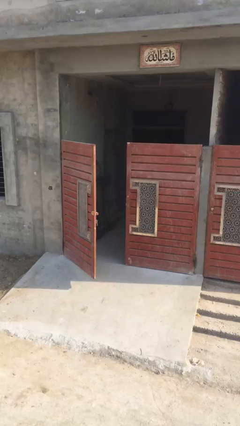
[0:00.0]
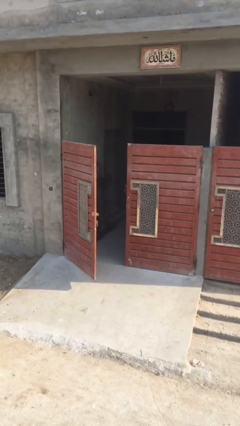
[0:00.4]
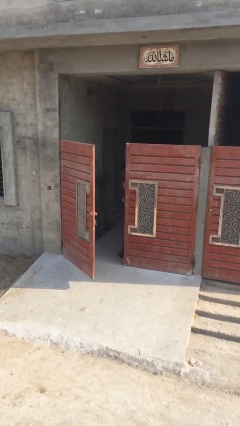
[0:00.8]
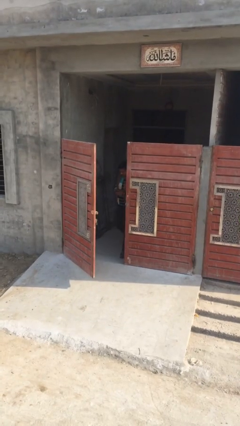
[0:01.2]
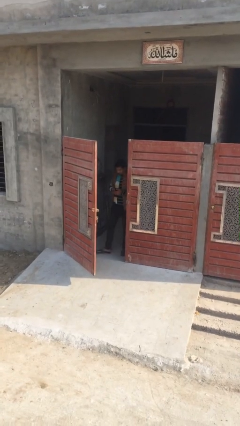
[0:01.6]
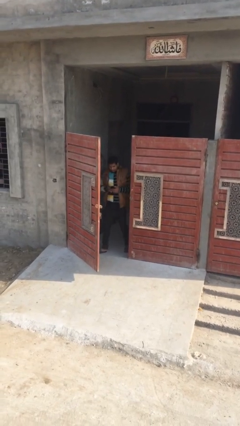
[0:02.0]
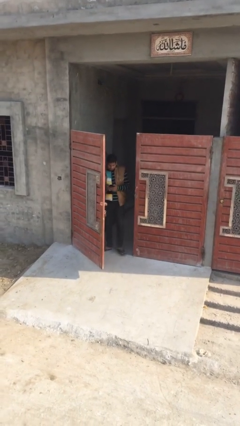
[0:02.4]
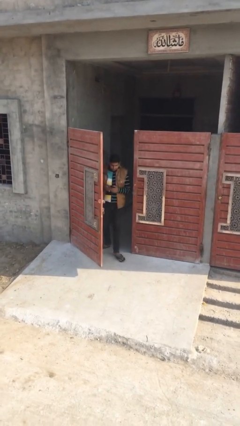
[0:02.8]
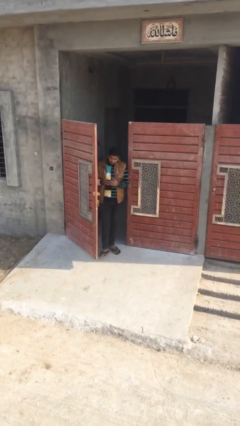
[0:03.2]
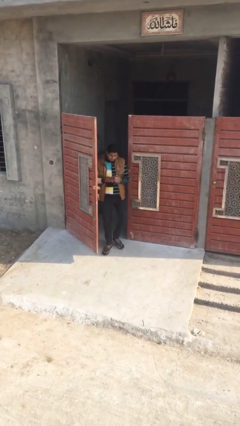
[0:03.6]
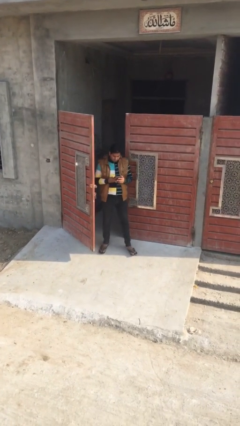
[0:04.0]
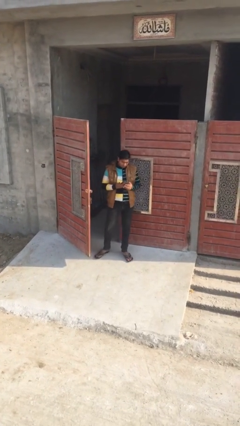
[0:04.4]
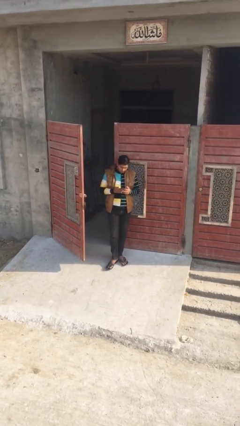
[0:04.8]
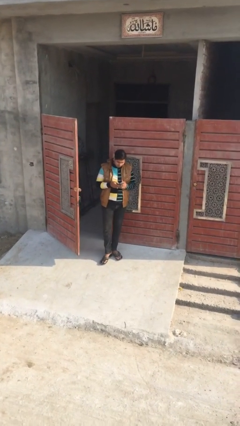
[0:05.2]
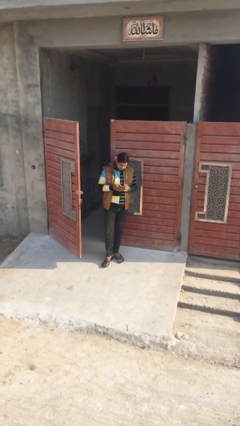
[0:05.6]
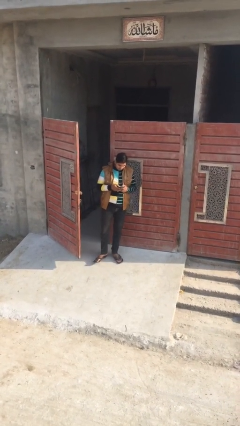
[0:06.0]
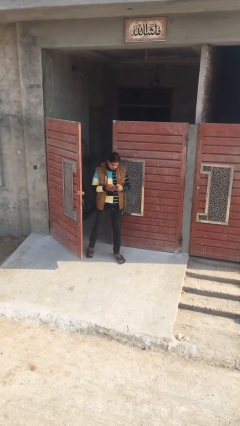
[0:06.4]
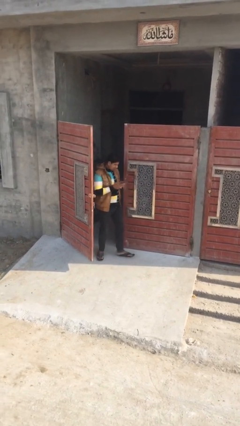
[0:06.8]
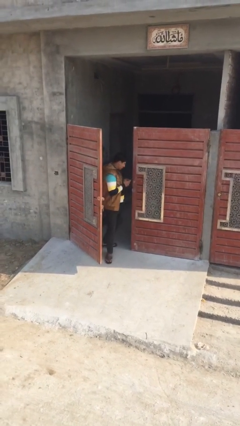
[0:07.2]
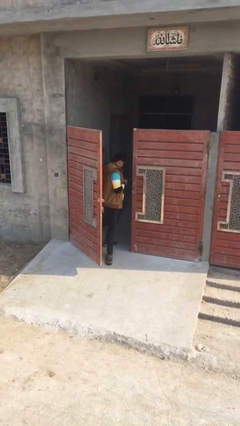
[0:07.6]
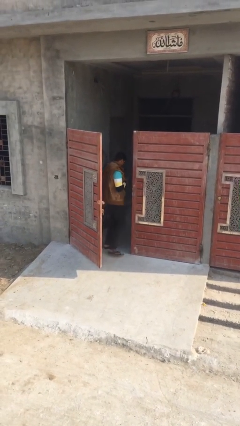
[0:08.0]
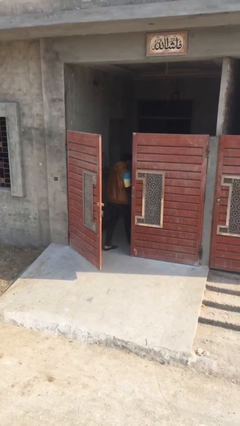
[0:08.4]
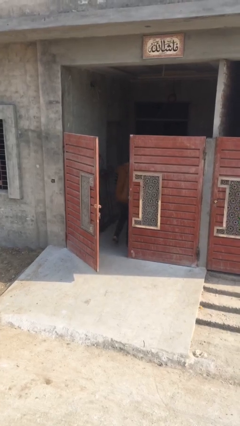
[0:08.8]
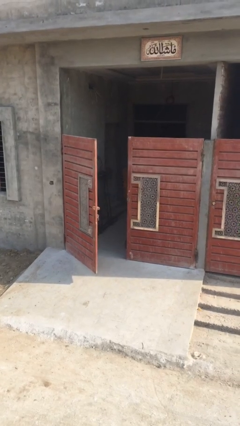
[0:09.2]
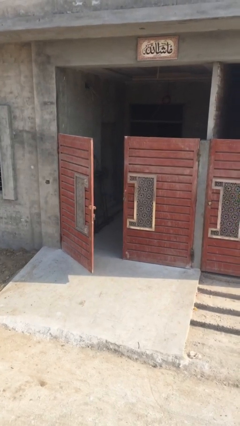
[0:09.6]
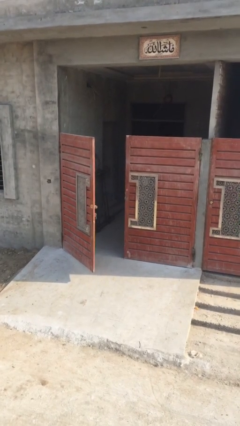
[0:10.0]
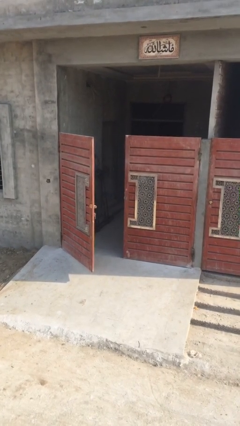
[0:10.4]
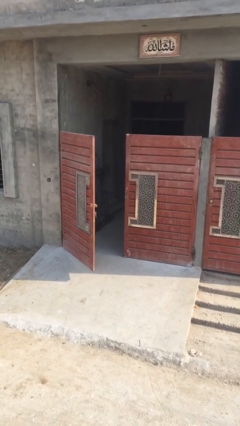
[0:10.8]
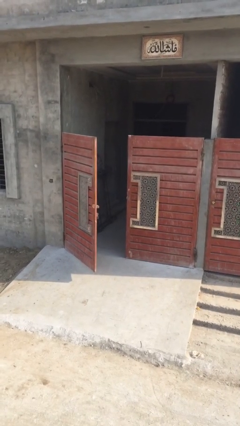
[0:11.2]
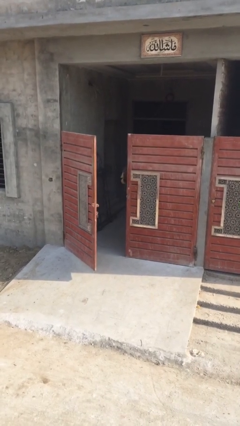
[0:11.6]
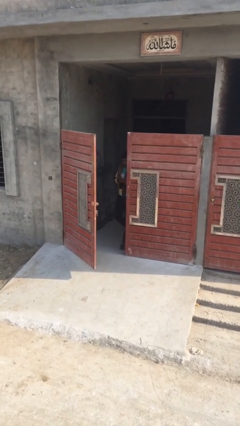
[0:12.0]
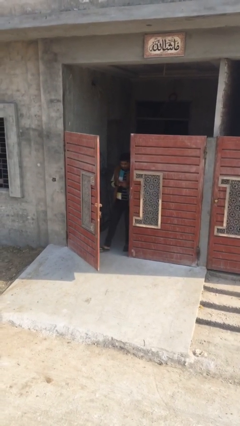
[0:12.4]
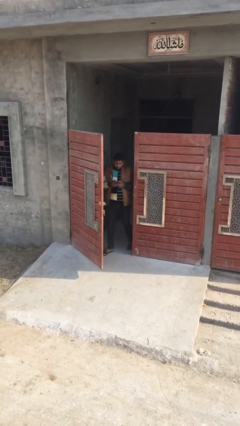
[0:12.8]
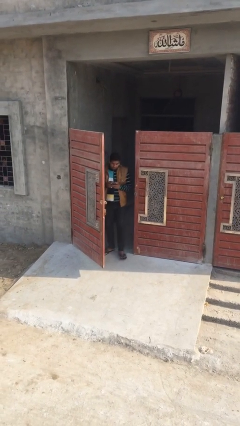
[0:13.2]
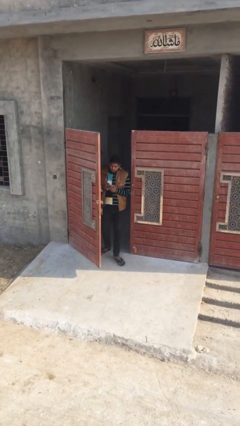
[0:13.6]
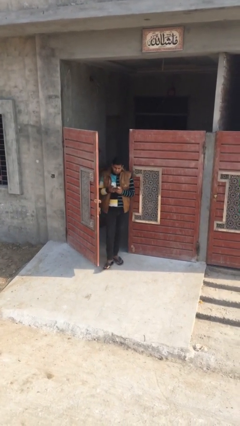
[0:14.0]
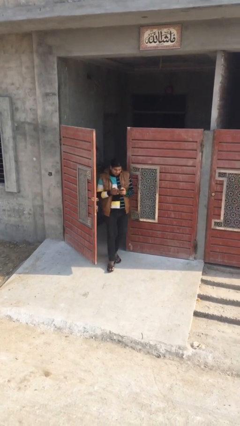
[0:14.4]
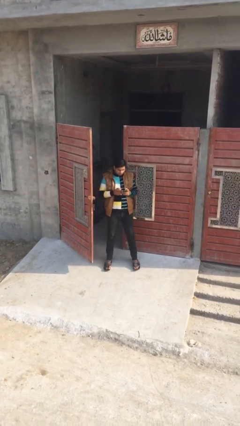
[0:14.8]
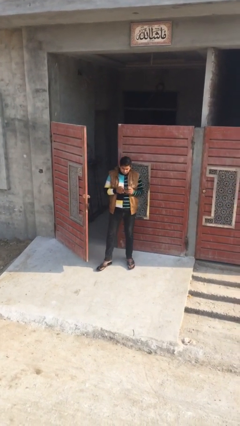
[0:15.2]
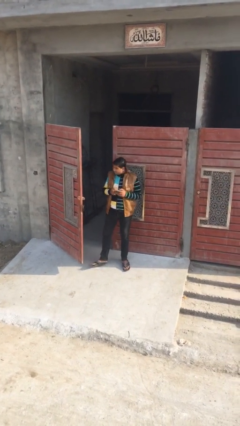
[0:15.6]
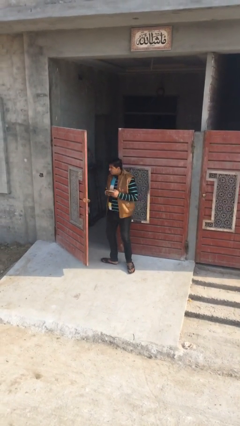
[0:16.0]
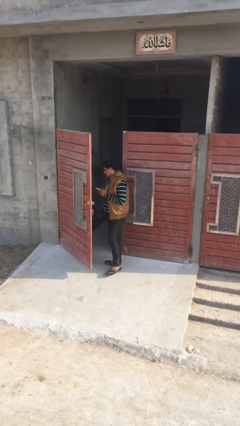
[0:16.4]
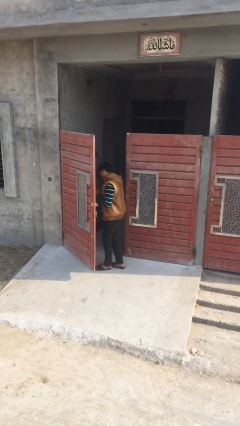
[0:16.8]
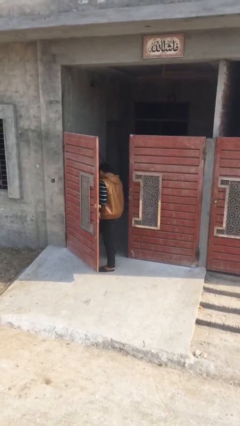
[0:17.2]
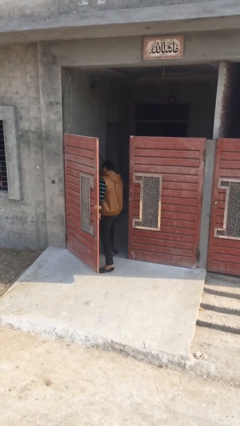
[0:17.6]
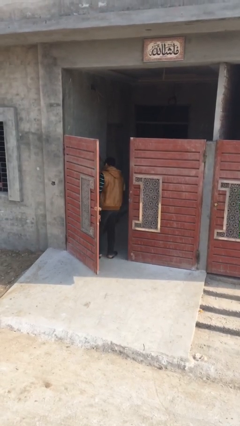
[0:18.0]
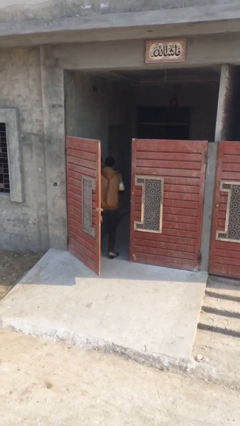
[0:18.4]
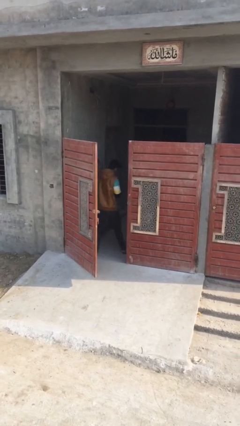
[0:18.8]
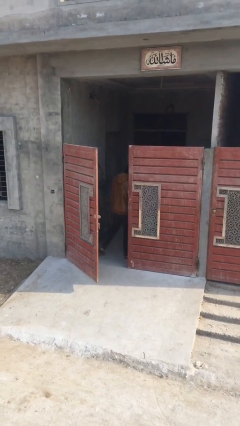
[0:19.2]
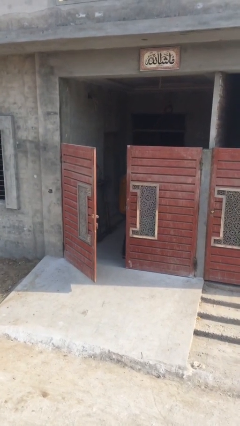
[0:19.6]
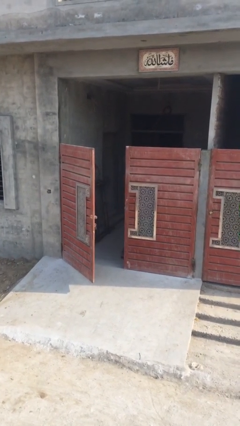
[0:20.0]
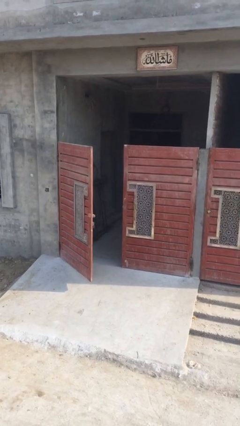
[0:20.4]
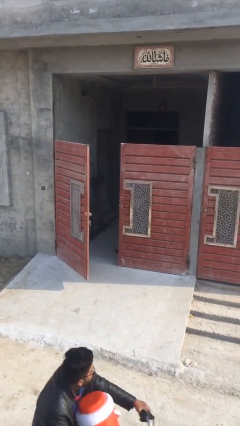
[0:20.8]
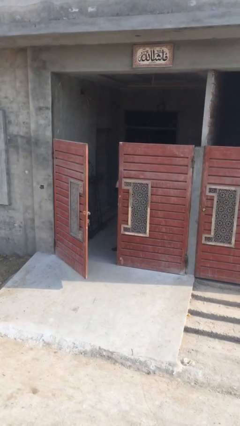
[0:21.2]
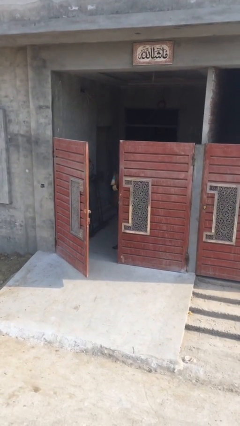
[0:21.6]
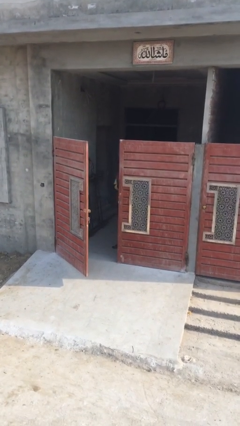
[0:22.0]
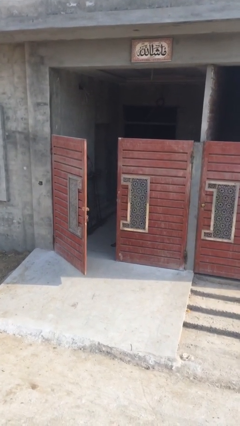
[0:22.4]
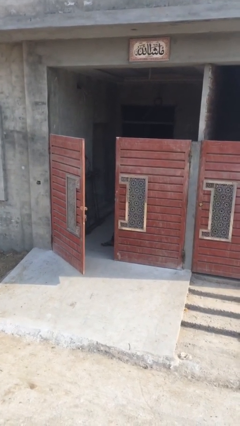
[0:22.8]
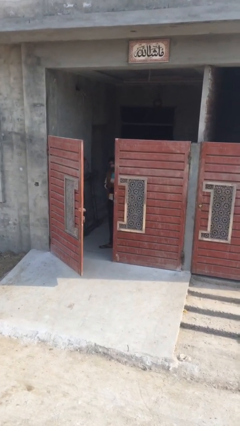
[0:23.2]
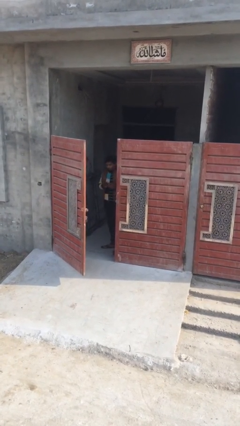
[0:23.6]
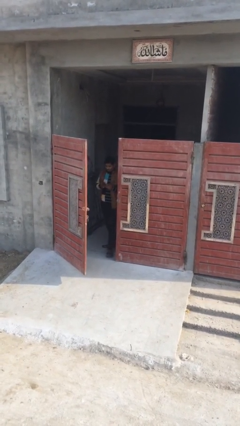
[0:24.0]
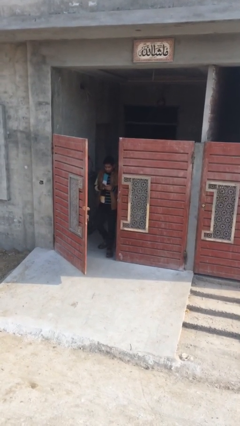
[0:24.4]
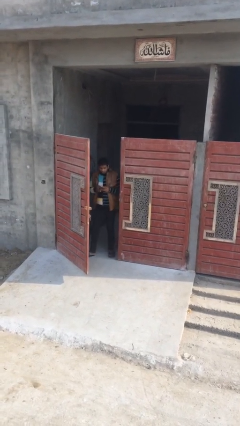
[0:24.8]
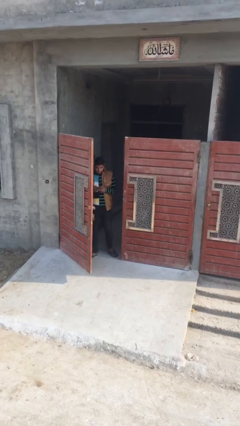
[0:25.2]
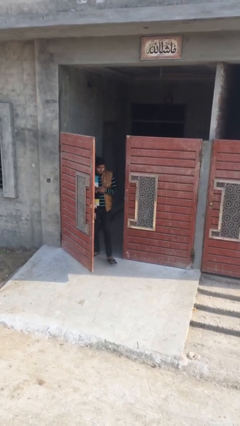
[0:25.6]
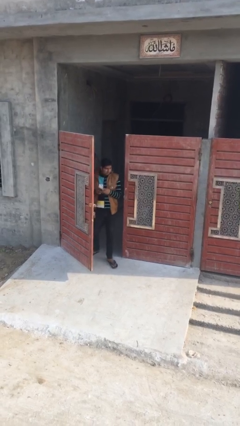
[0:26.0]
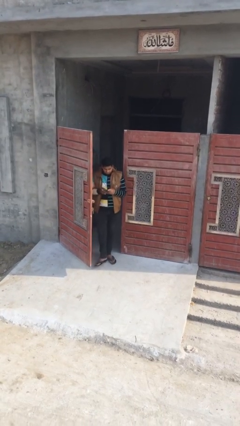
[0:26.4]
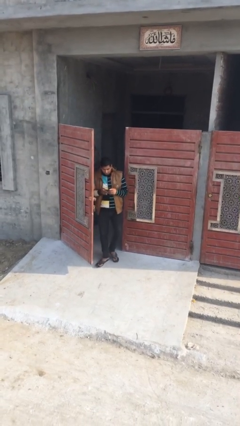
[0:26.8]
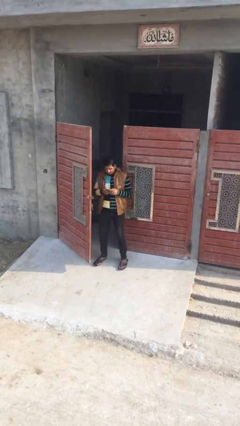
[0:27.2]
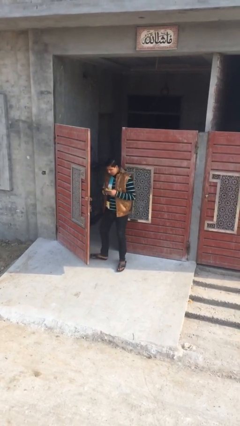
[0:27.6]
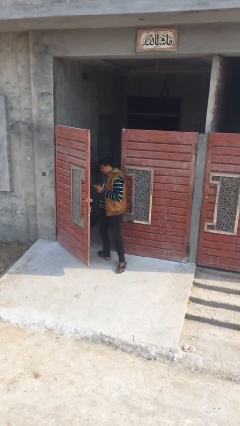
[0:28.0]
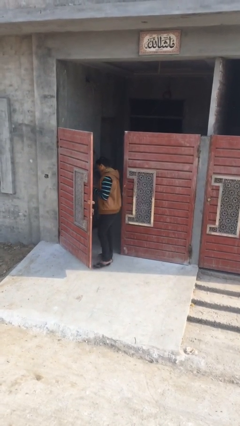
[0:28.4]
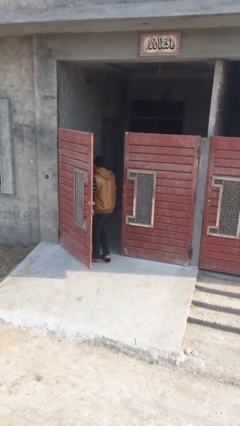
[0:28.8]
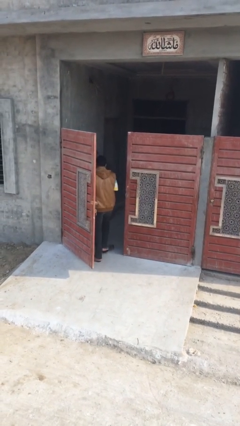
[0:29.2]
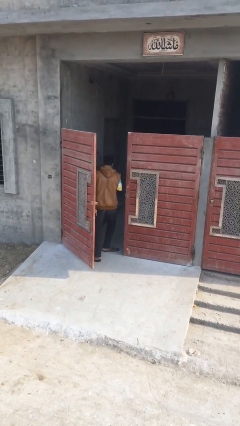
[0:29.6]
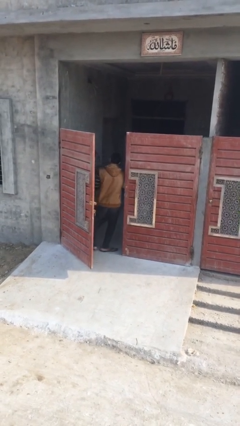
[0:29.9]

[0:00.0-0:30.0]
person texts on phone

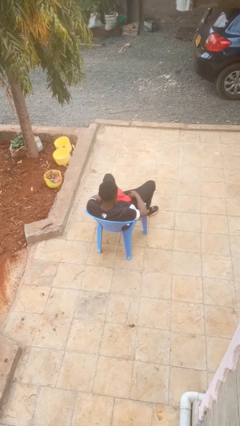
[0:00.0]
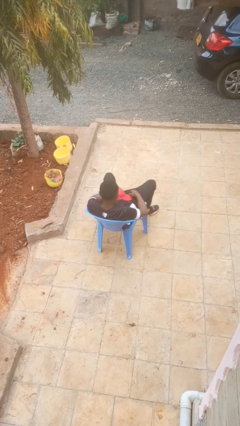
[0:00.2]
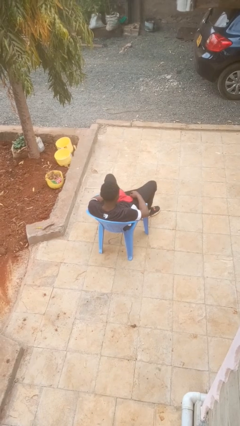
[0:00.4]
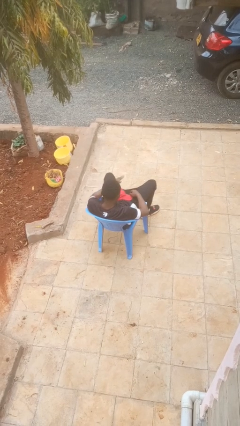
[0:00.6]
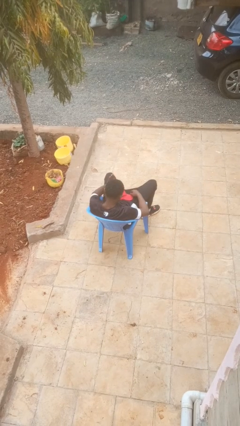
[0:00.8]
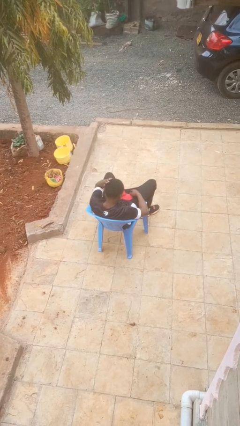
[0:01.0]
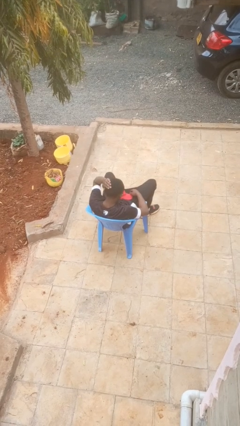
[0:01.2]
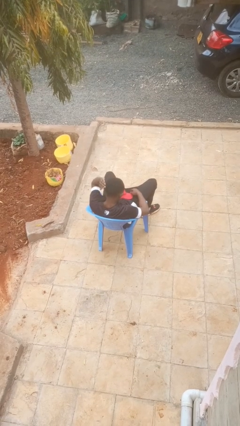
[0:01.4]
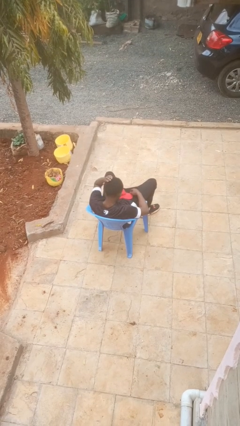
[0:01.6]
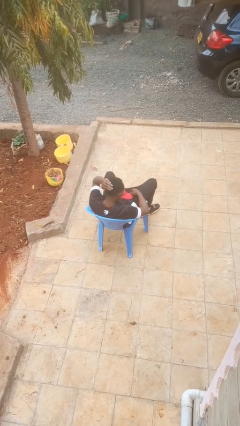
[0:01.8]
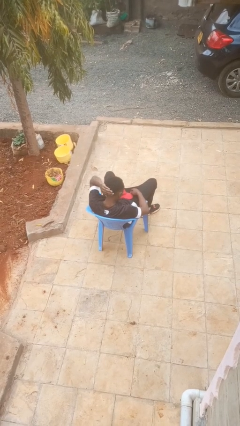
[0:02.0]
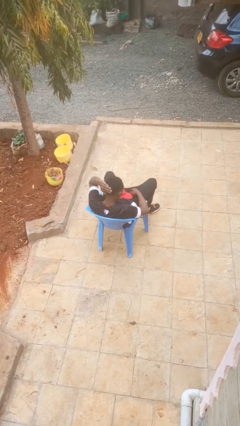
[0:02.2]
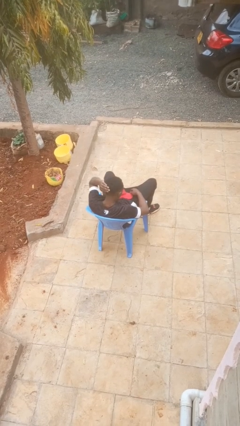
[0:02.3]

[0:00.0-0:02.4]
person strokes hair

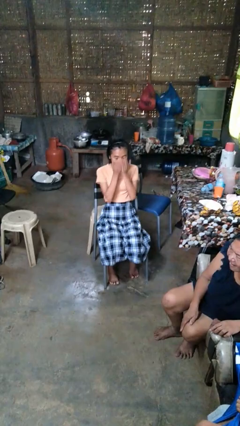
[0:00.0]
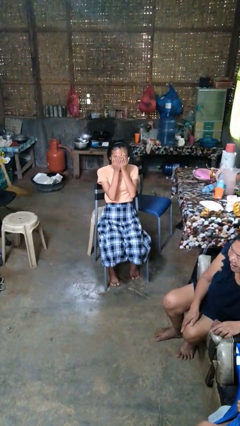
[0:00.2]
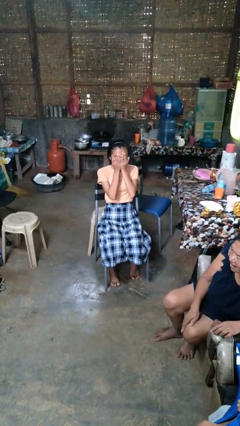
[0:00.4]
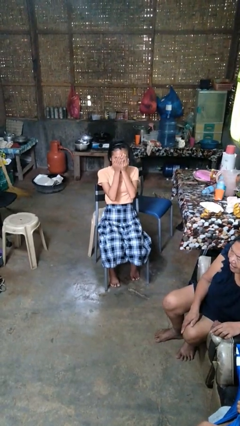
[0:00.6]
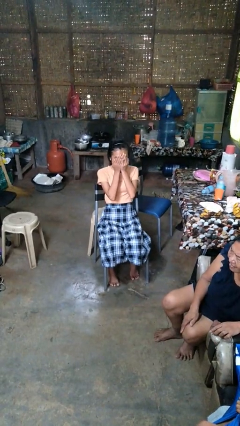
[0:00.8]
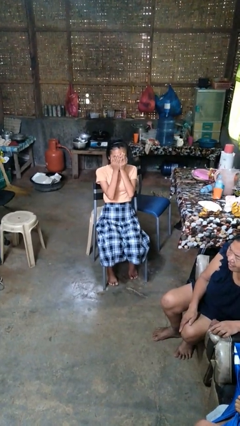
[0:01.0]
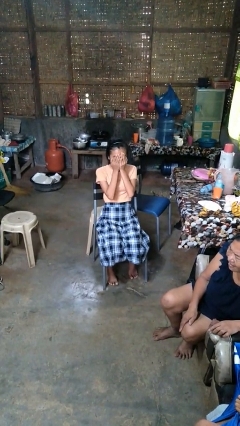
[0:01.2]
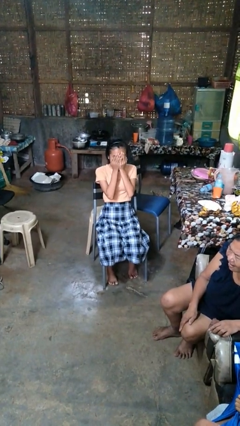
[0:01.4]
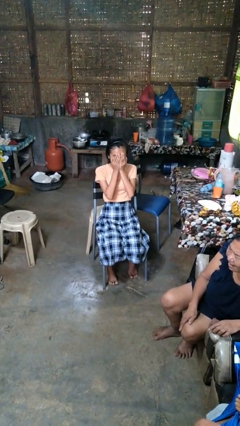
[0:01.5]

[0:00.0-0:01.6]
person covers face with hands
